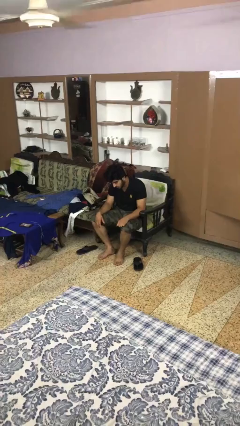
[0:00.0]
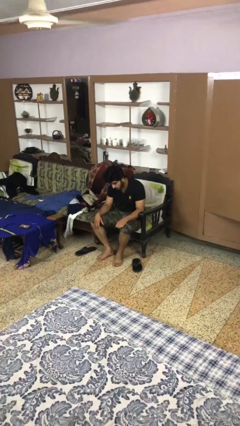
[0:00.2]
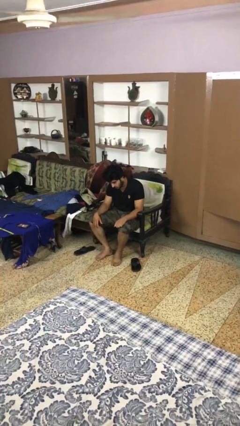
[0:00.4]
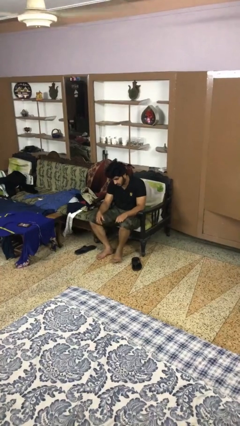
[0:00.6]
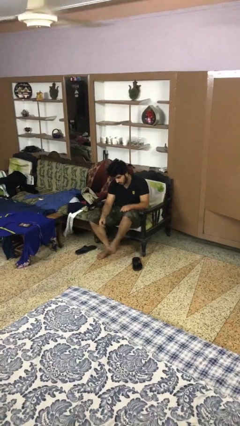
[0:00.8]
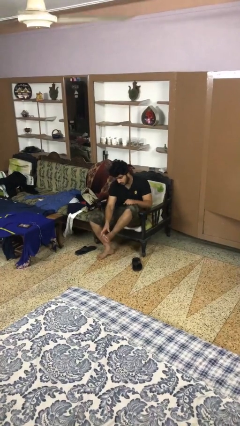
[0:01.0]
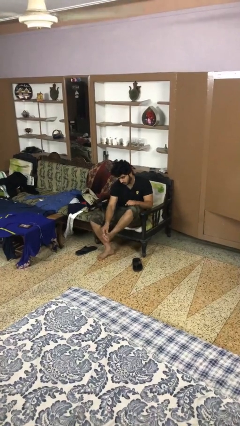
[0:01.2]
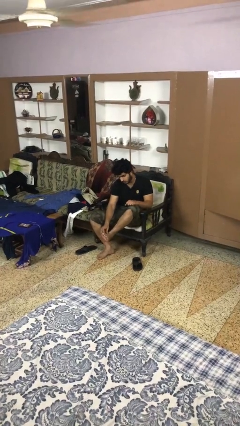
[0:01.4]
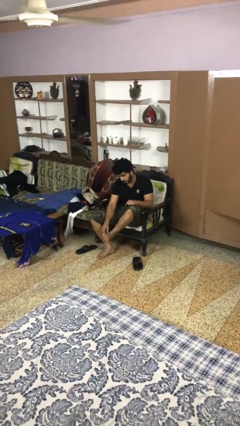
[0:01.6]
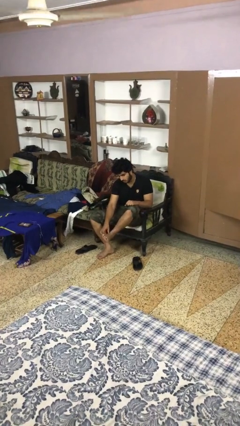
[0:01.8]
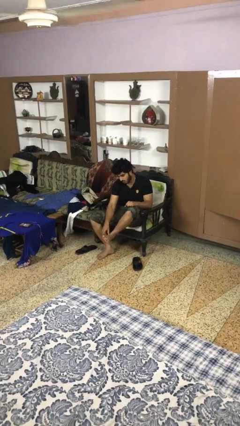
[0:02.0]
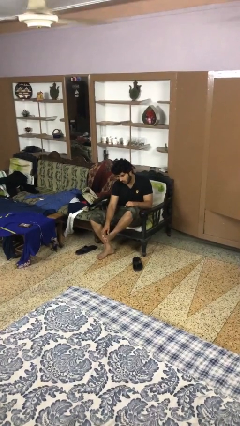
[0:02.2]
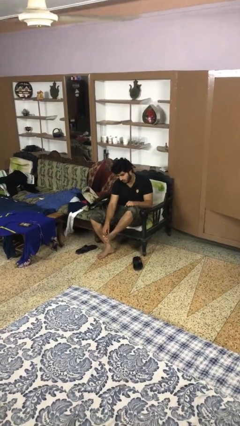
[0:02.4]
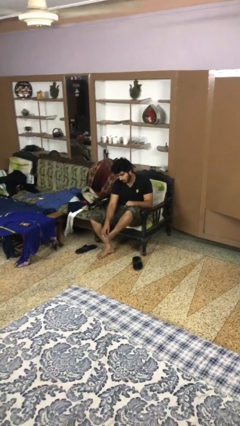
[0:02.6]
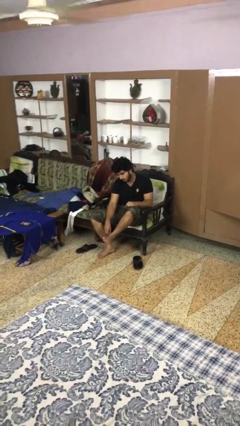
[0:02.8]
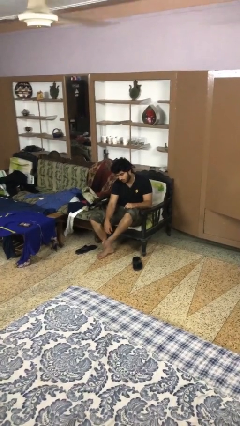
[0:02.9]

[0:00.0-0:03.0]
person rubs foot

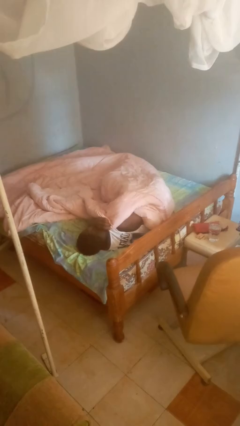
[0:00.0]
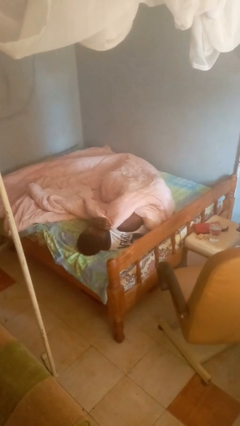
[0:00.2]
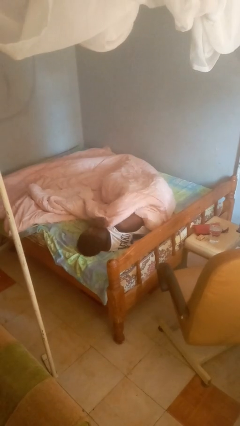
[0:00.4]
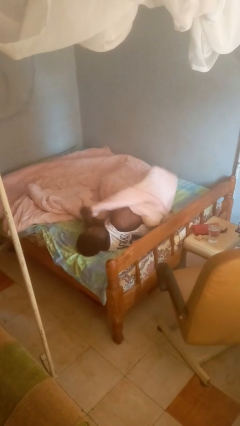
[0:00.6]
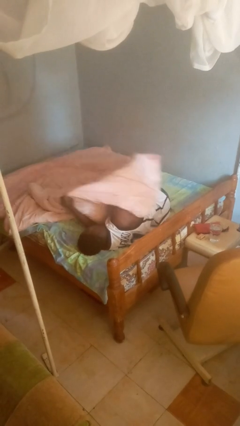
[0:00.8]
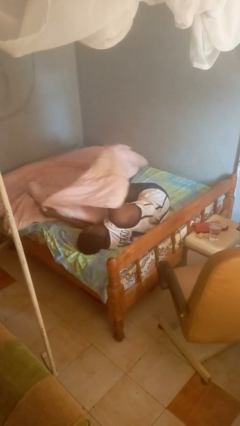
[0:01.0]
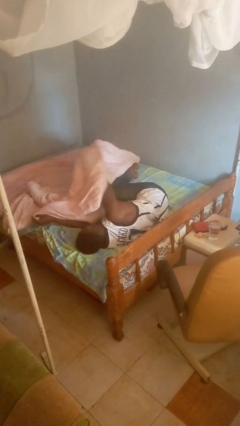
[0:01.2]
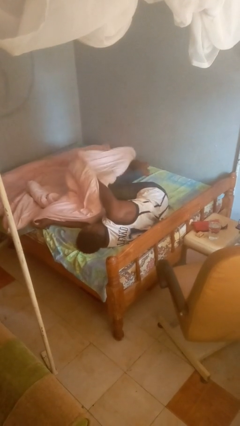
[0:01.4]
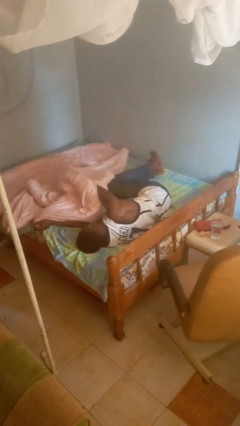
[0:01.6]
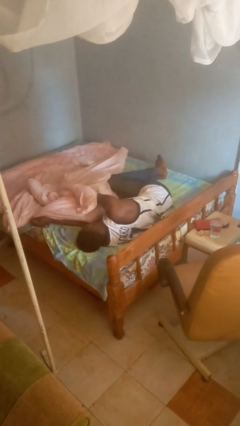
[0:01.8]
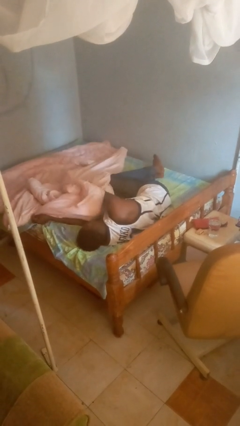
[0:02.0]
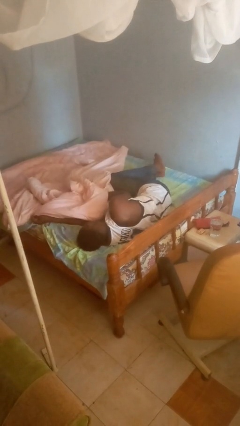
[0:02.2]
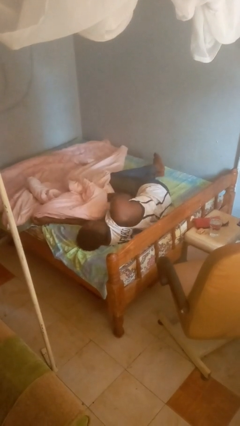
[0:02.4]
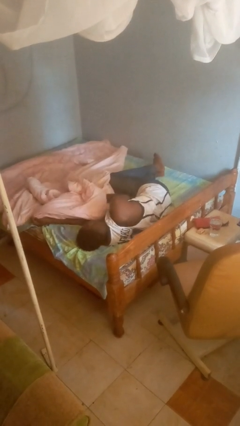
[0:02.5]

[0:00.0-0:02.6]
person uncovers with blanket

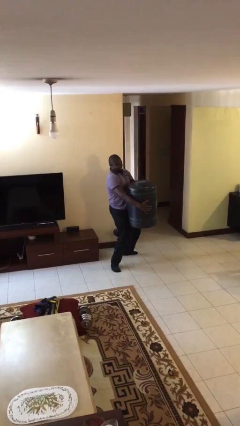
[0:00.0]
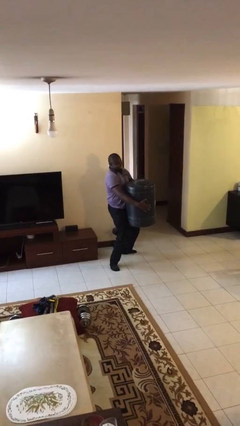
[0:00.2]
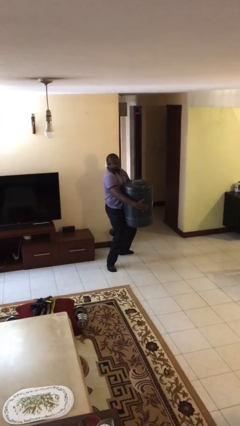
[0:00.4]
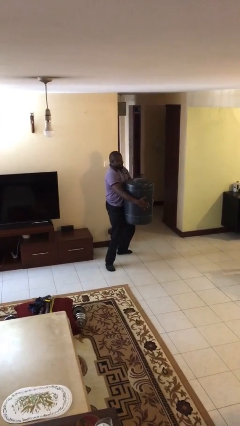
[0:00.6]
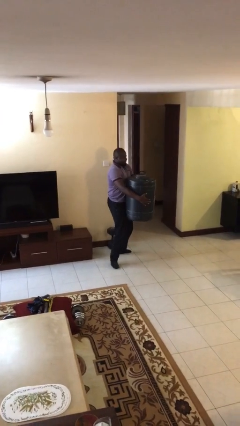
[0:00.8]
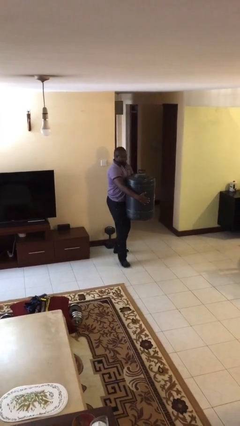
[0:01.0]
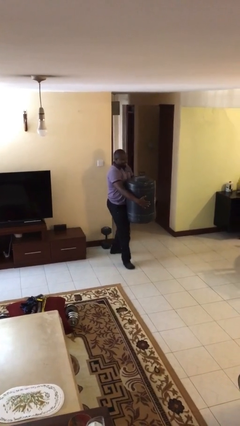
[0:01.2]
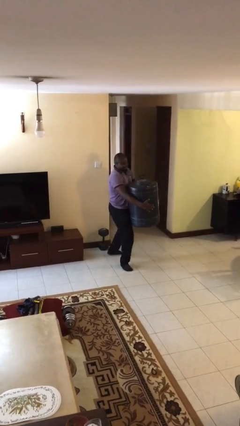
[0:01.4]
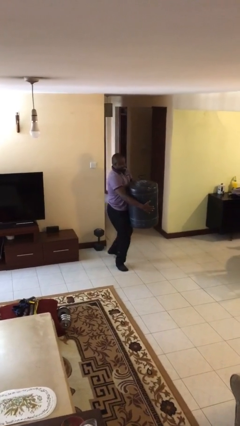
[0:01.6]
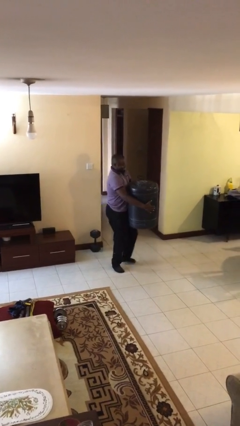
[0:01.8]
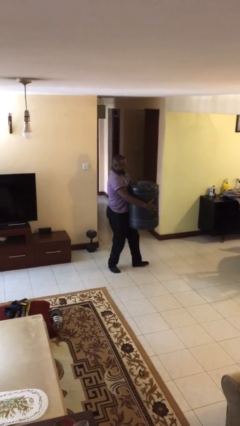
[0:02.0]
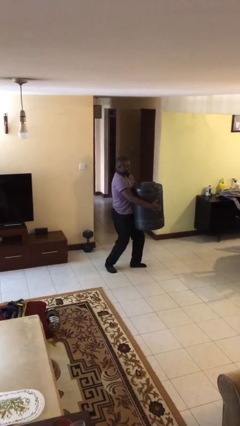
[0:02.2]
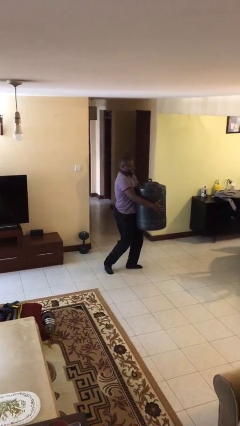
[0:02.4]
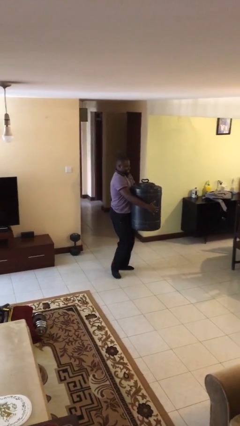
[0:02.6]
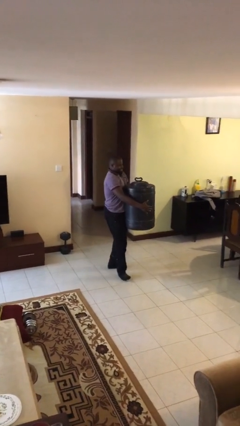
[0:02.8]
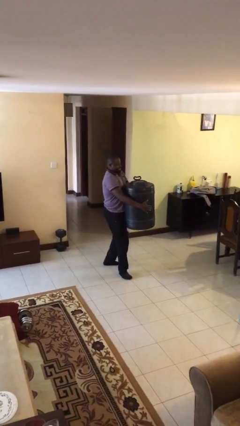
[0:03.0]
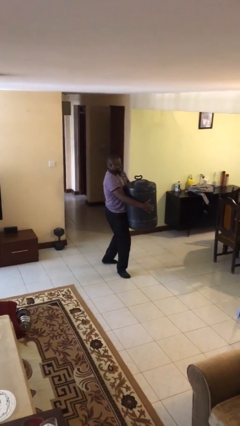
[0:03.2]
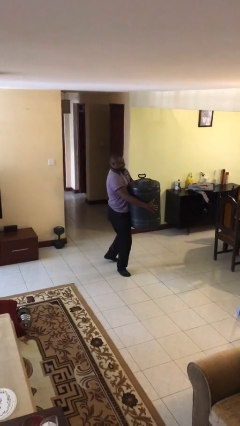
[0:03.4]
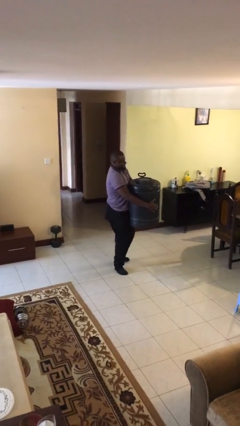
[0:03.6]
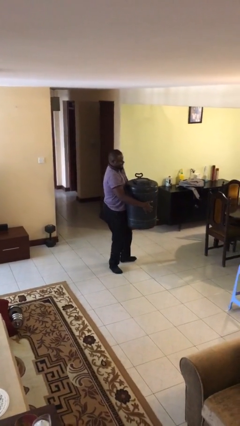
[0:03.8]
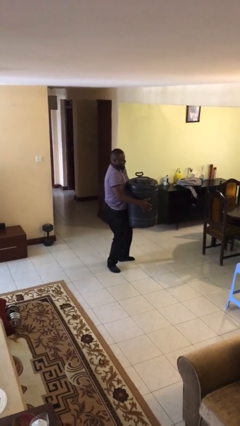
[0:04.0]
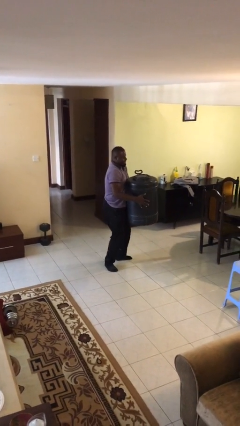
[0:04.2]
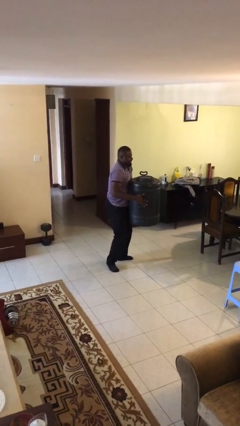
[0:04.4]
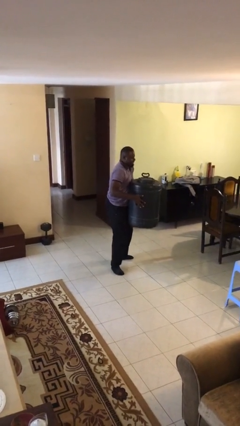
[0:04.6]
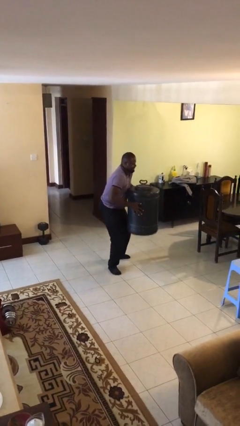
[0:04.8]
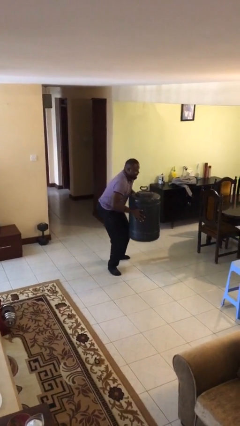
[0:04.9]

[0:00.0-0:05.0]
person carries heavy object

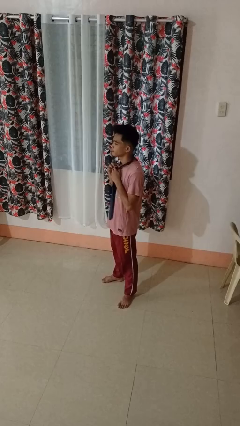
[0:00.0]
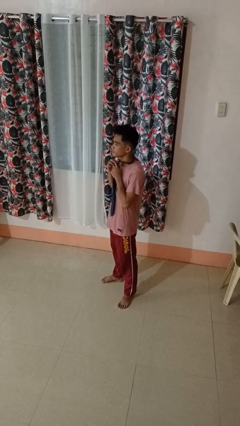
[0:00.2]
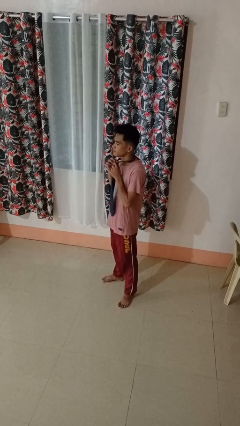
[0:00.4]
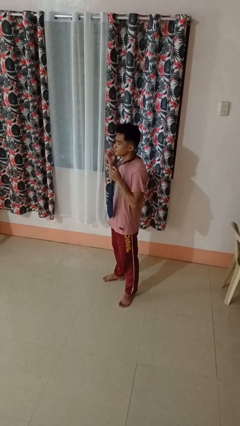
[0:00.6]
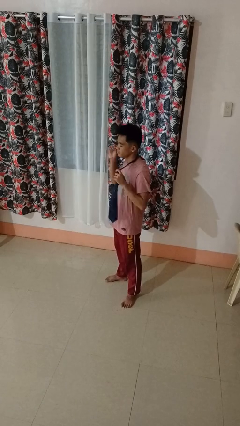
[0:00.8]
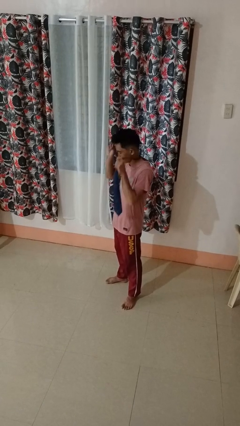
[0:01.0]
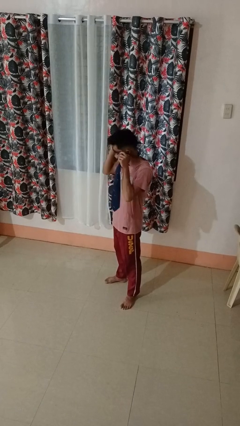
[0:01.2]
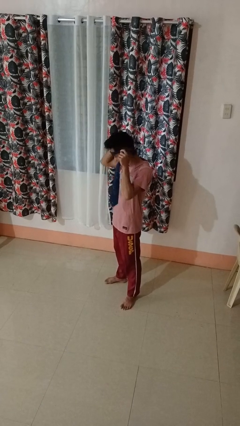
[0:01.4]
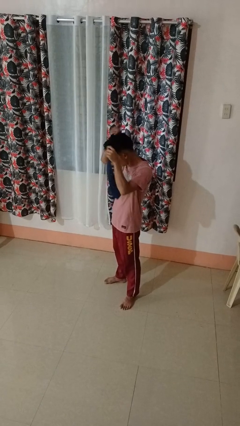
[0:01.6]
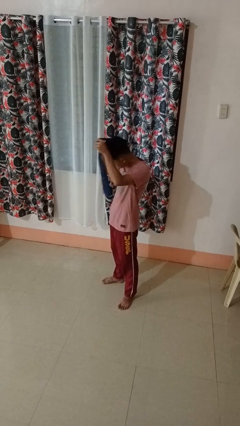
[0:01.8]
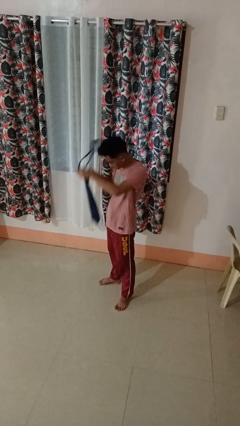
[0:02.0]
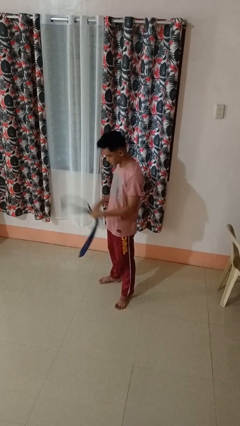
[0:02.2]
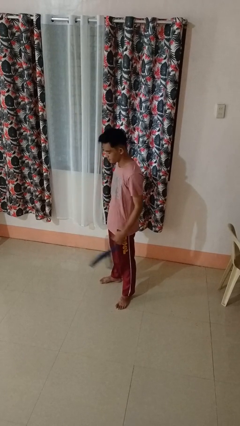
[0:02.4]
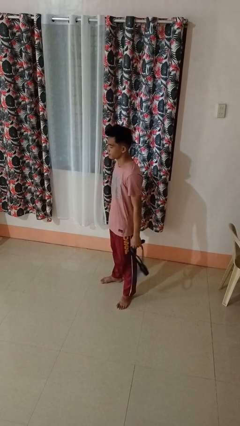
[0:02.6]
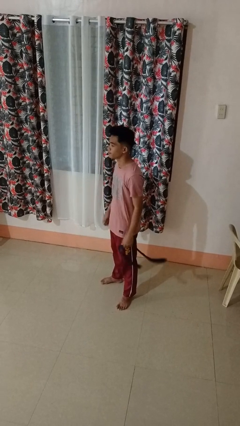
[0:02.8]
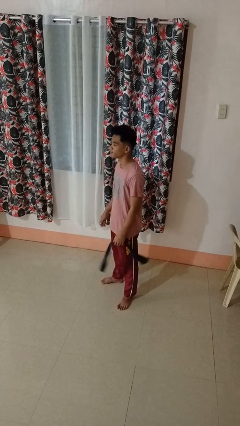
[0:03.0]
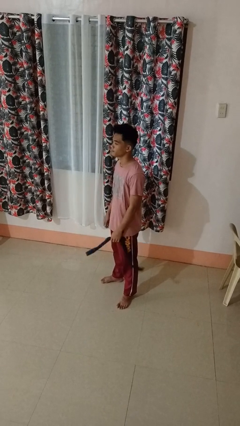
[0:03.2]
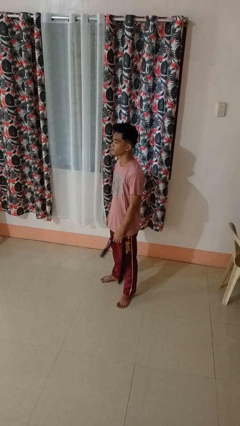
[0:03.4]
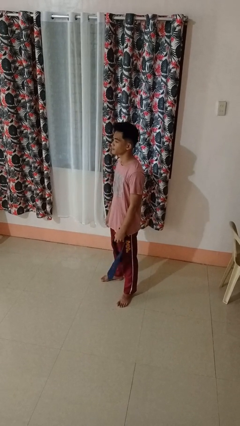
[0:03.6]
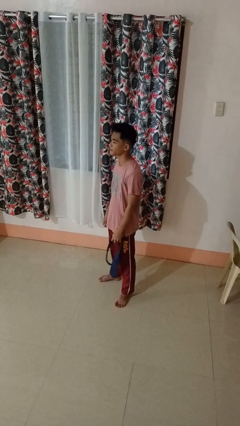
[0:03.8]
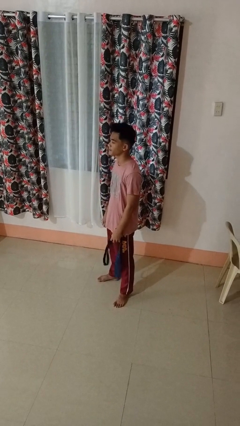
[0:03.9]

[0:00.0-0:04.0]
person takes off necktie

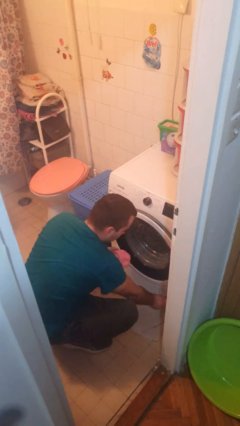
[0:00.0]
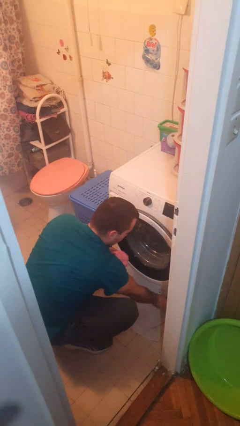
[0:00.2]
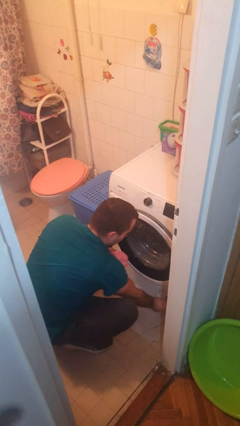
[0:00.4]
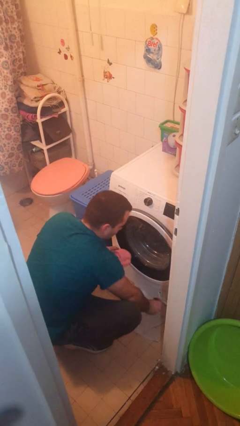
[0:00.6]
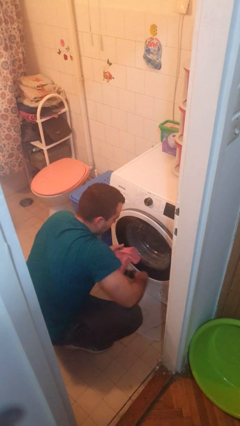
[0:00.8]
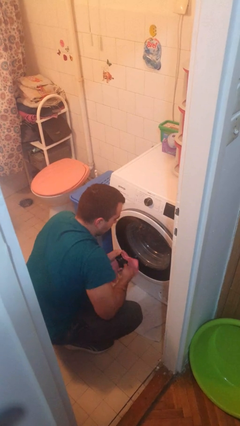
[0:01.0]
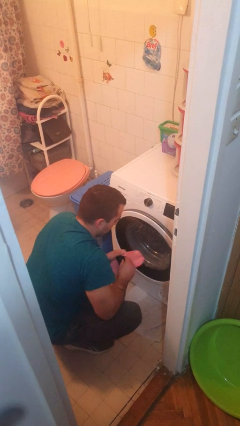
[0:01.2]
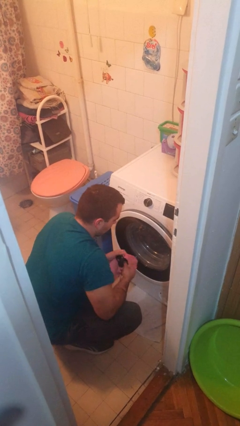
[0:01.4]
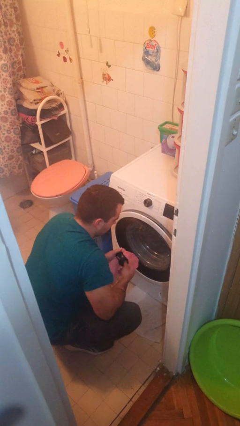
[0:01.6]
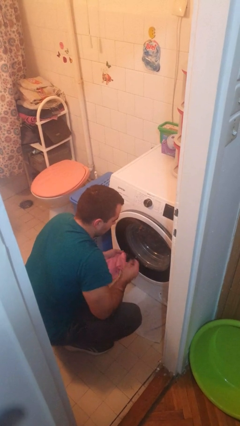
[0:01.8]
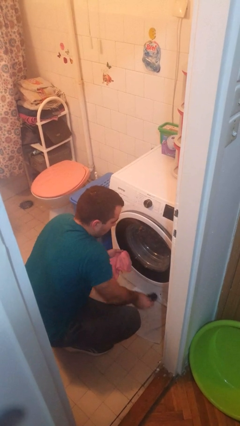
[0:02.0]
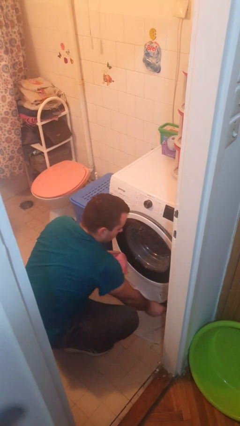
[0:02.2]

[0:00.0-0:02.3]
person cleans dryer lint trap

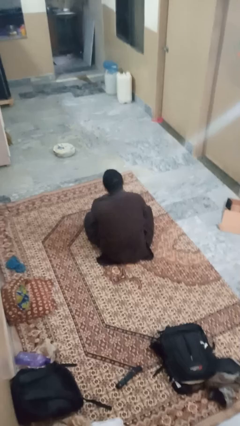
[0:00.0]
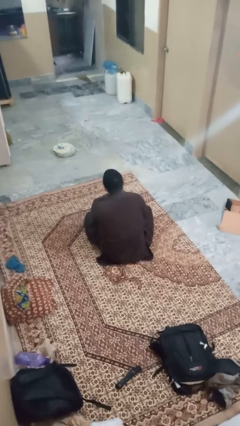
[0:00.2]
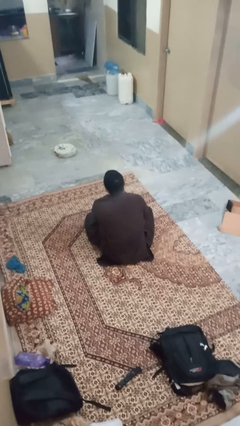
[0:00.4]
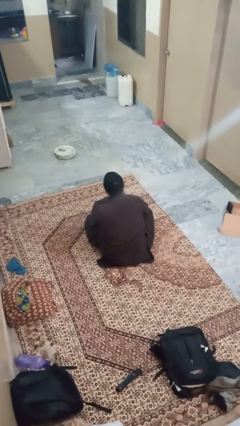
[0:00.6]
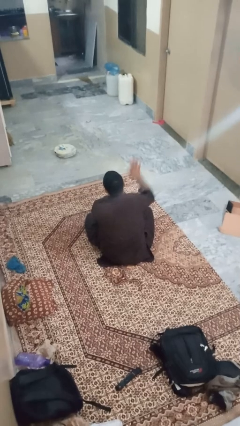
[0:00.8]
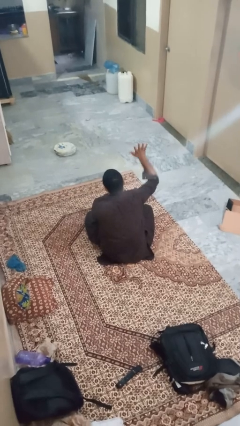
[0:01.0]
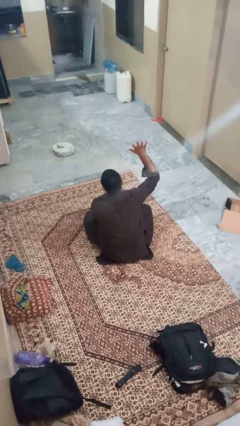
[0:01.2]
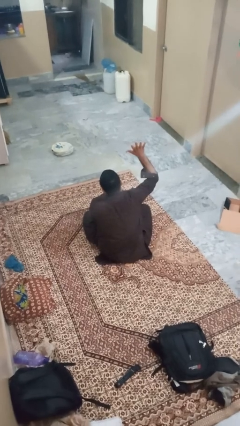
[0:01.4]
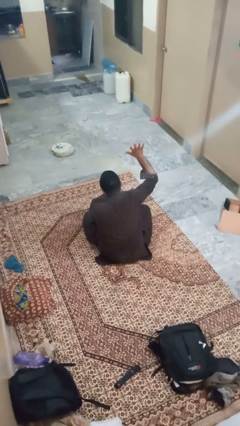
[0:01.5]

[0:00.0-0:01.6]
person gestures number five
